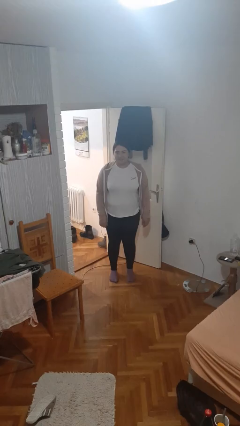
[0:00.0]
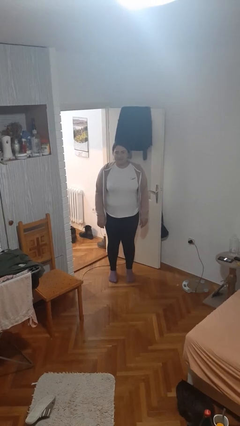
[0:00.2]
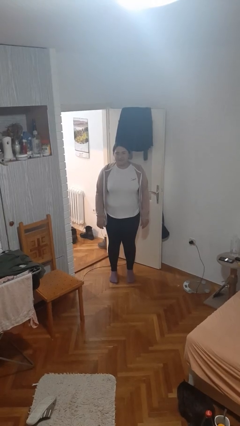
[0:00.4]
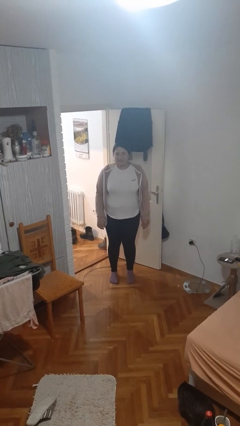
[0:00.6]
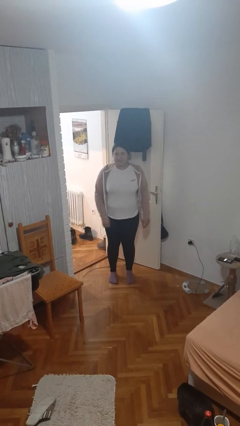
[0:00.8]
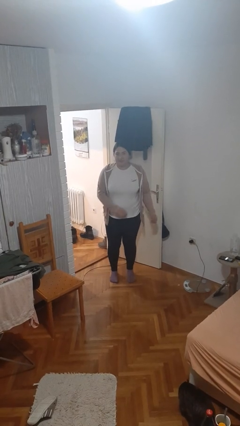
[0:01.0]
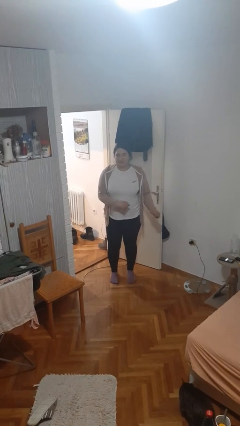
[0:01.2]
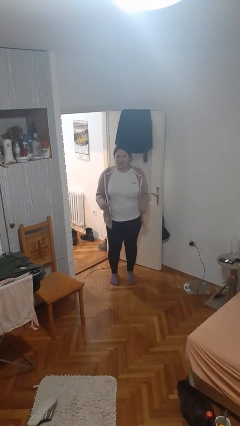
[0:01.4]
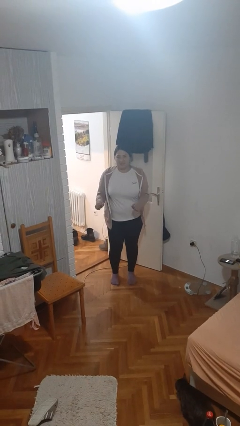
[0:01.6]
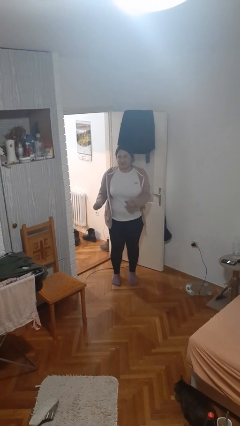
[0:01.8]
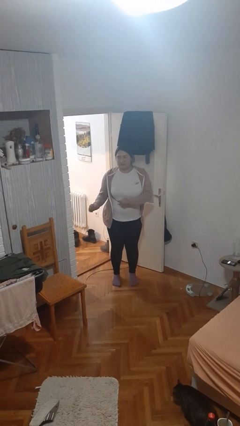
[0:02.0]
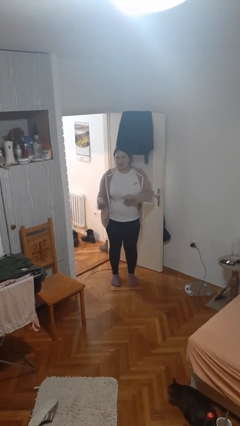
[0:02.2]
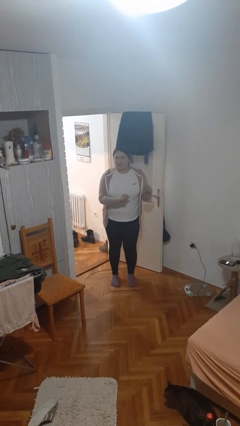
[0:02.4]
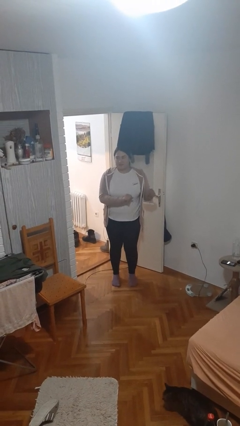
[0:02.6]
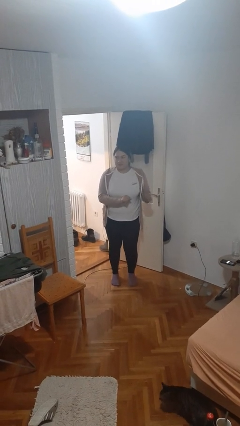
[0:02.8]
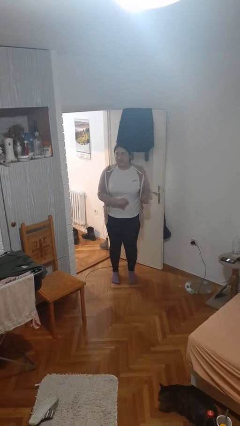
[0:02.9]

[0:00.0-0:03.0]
person dances in place

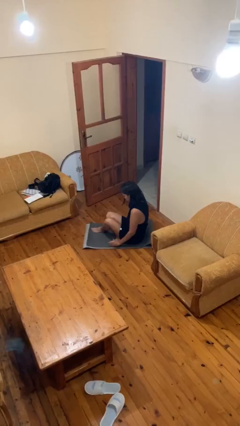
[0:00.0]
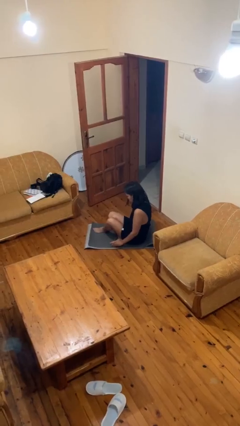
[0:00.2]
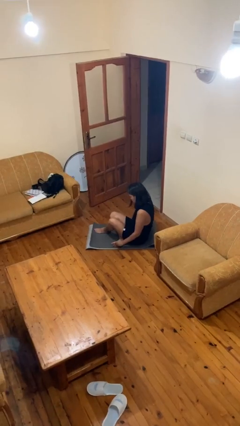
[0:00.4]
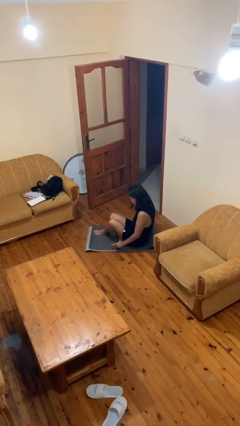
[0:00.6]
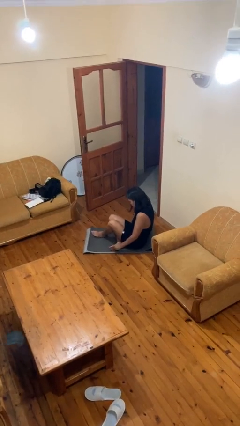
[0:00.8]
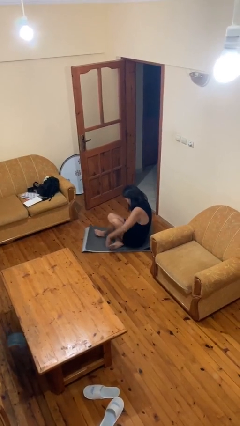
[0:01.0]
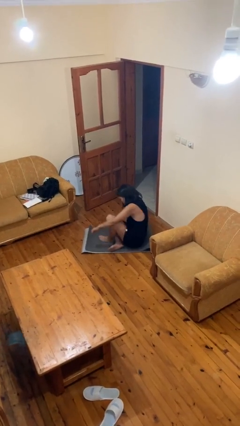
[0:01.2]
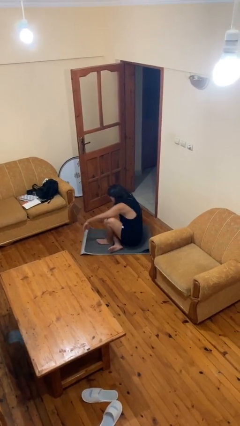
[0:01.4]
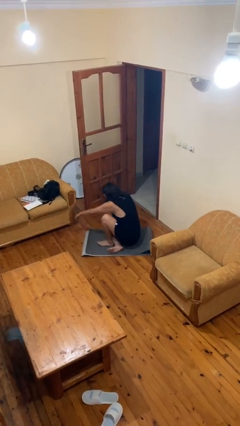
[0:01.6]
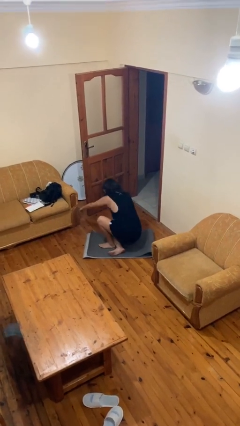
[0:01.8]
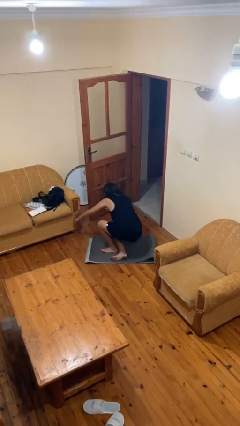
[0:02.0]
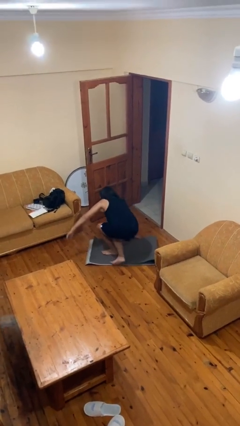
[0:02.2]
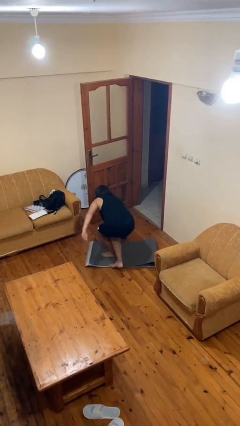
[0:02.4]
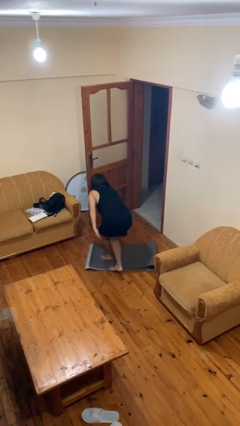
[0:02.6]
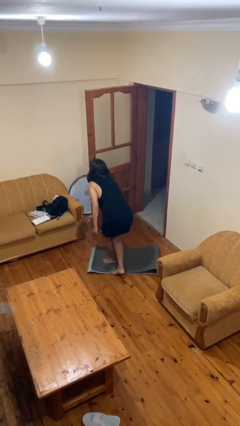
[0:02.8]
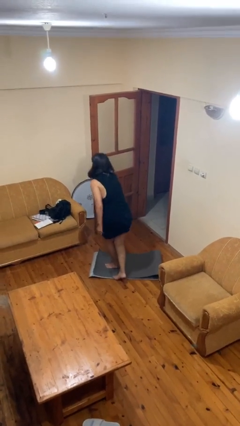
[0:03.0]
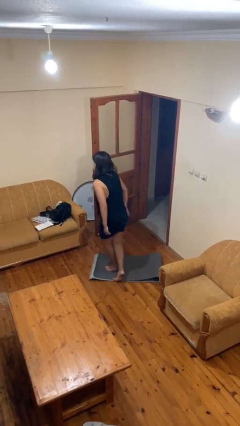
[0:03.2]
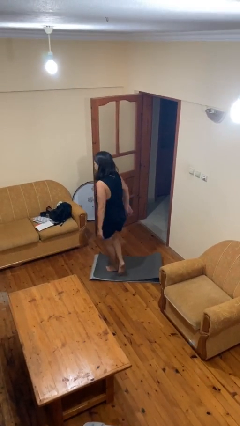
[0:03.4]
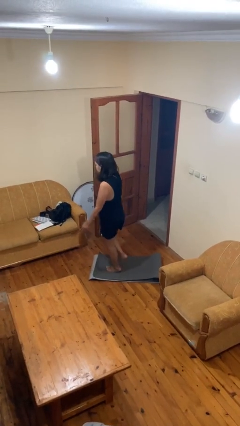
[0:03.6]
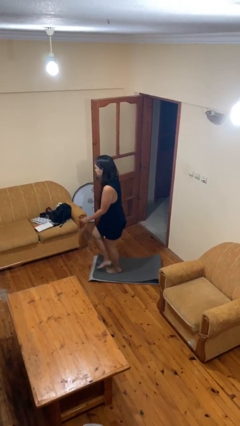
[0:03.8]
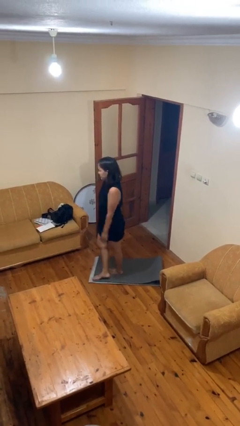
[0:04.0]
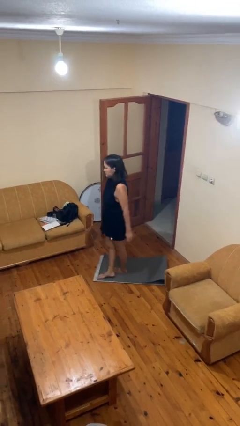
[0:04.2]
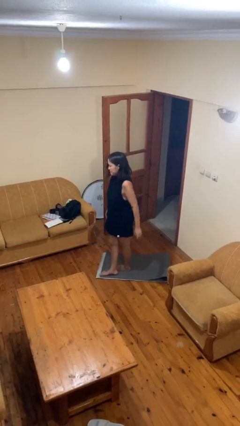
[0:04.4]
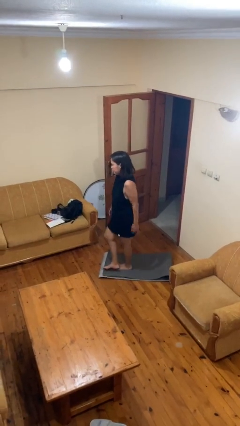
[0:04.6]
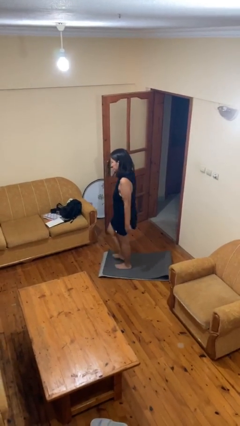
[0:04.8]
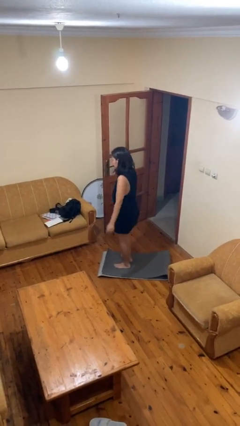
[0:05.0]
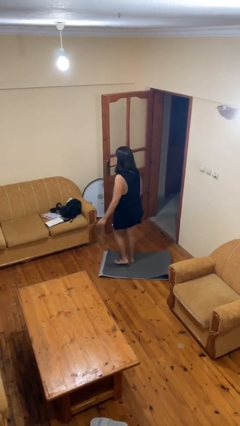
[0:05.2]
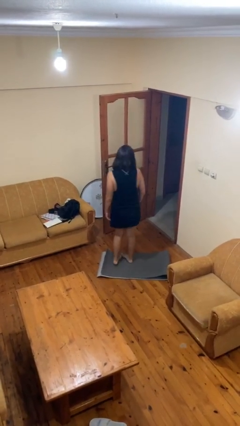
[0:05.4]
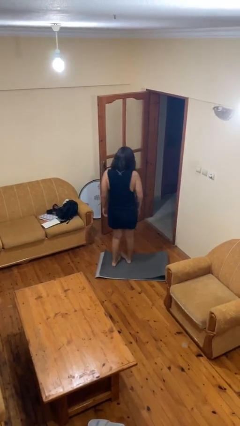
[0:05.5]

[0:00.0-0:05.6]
person stands up from floor

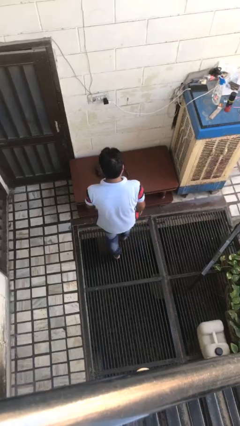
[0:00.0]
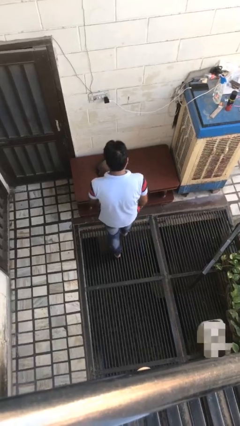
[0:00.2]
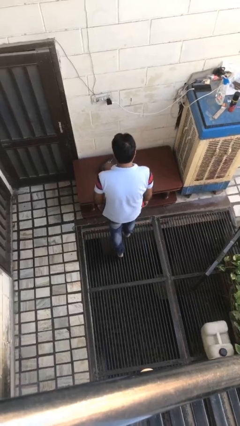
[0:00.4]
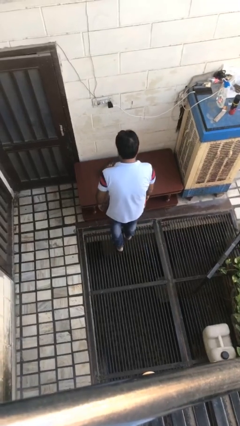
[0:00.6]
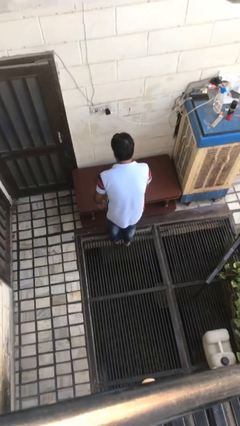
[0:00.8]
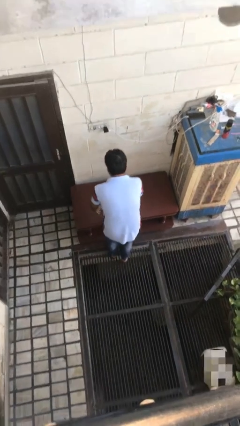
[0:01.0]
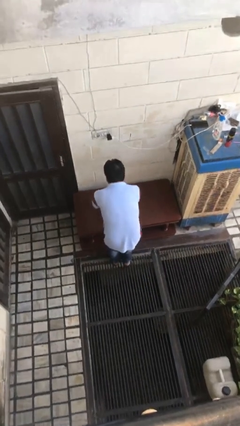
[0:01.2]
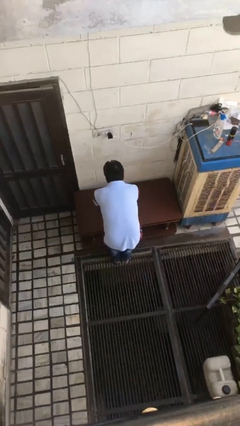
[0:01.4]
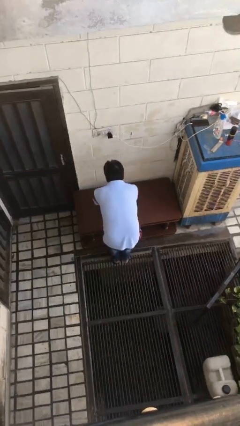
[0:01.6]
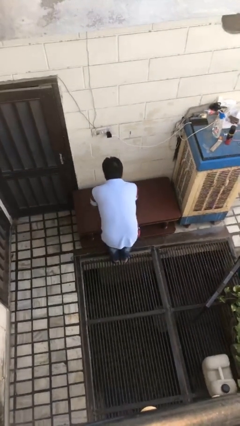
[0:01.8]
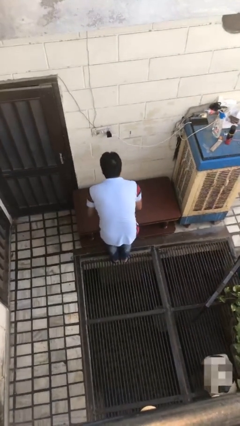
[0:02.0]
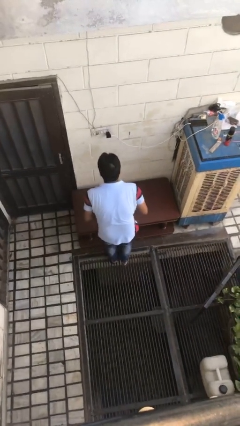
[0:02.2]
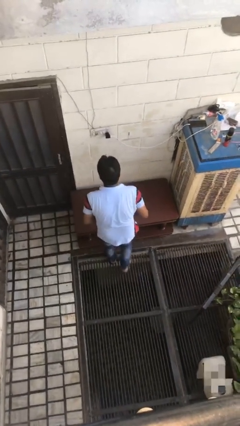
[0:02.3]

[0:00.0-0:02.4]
person picks up object from table

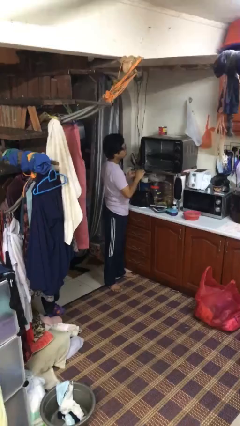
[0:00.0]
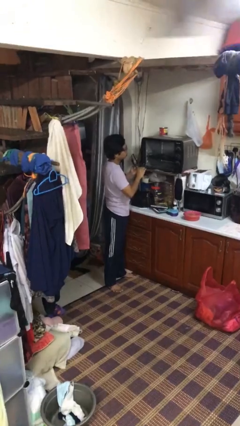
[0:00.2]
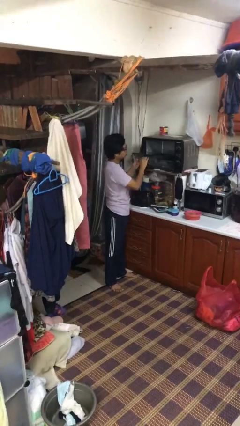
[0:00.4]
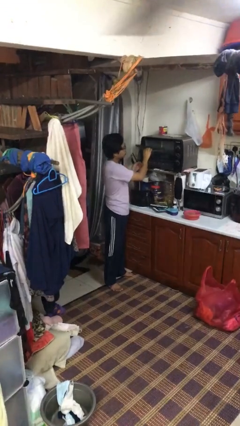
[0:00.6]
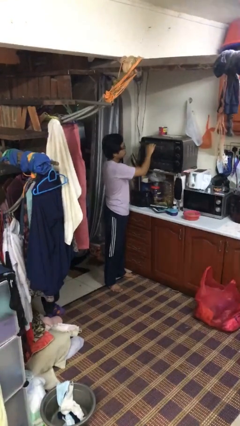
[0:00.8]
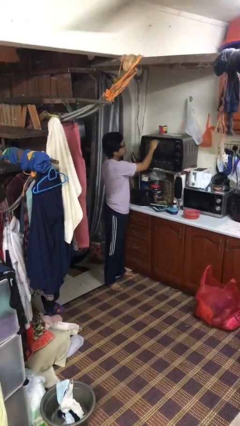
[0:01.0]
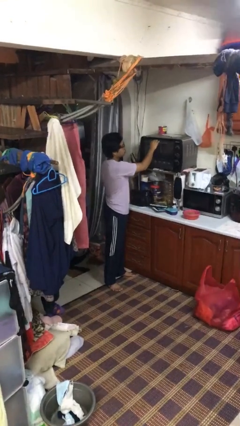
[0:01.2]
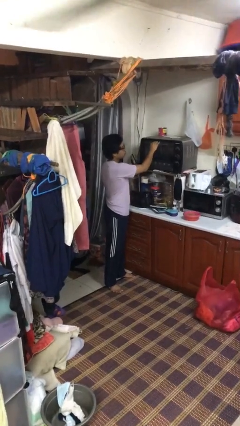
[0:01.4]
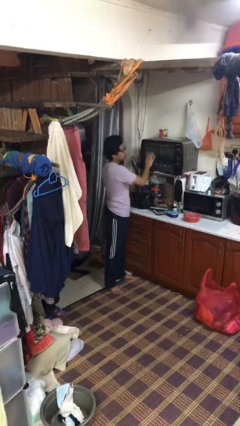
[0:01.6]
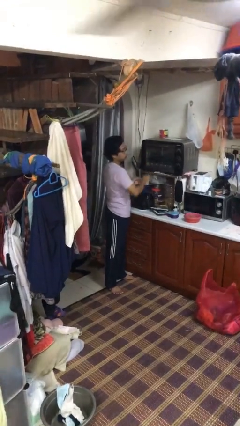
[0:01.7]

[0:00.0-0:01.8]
person closes oven door

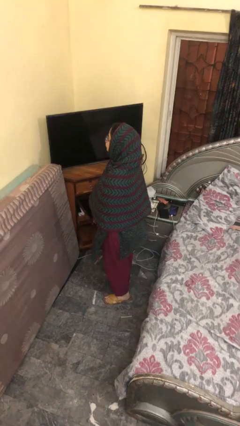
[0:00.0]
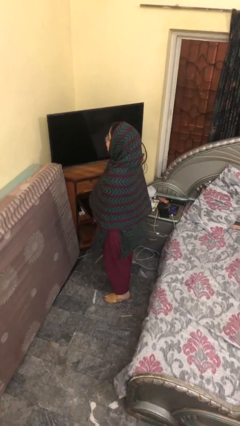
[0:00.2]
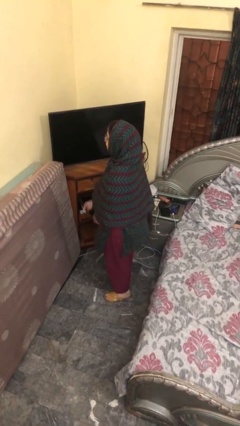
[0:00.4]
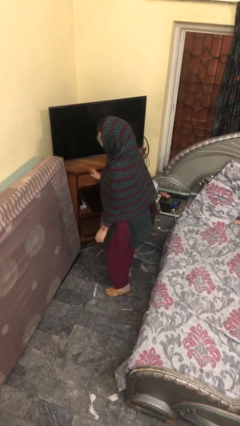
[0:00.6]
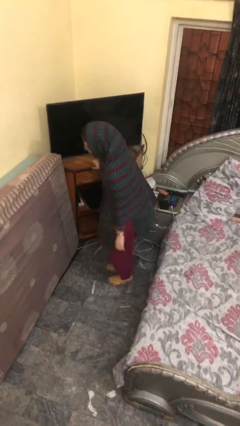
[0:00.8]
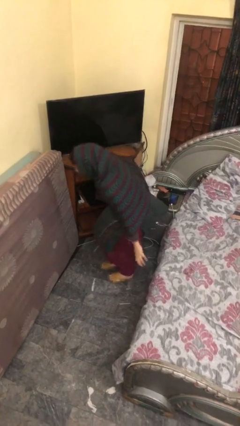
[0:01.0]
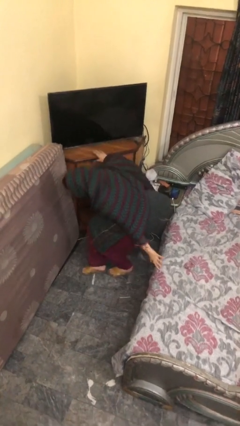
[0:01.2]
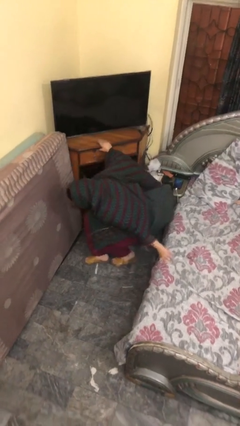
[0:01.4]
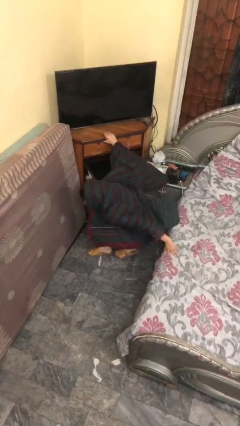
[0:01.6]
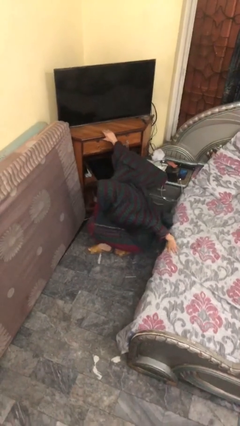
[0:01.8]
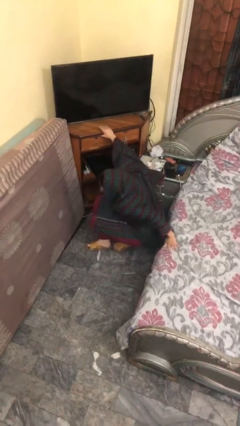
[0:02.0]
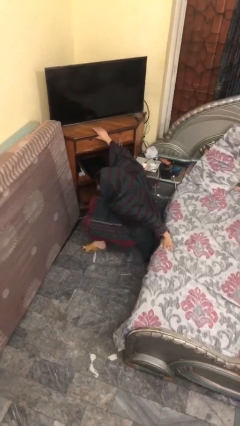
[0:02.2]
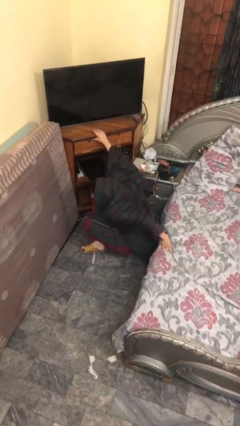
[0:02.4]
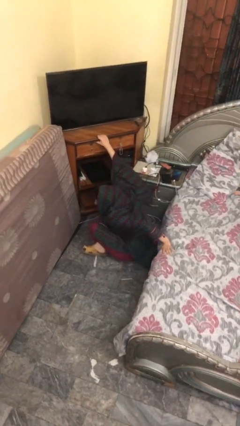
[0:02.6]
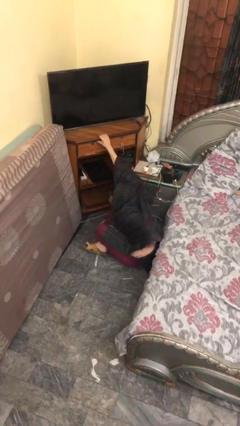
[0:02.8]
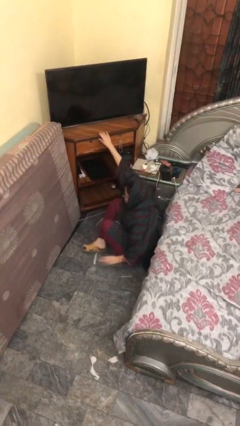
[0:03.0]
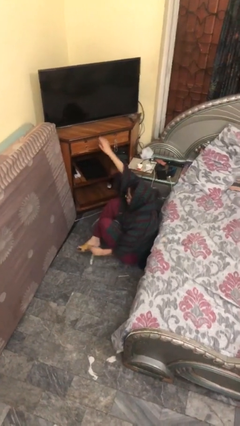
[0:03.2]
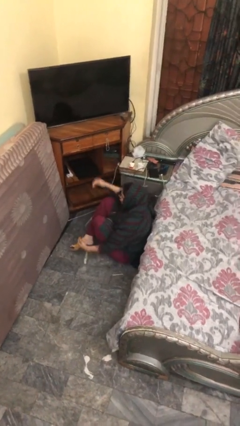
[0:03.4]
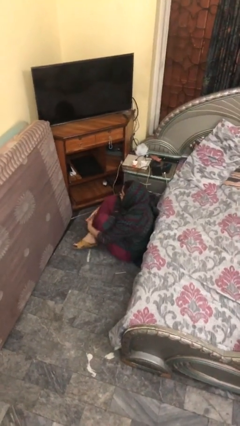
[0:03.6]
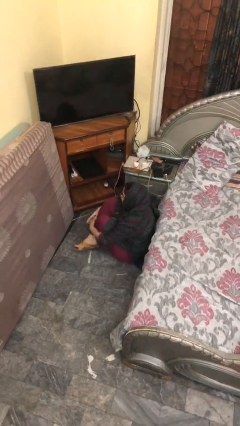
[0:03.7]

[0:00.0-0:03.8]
person sits crisscross

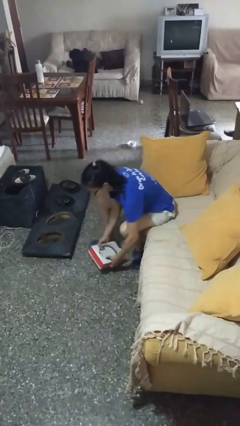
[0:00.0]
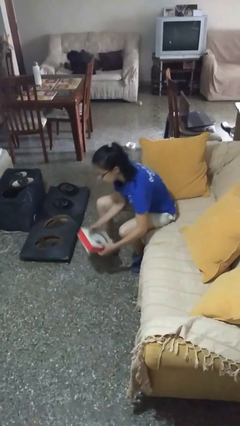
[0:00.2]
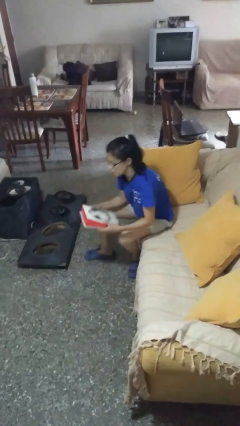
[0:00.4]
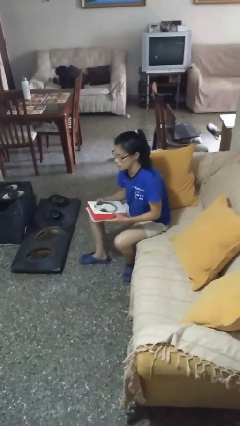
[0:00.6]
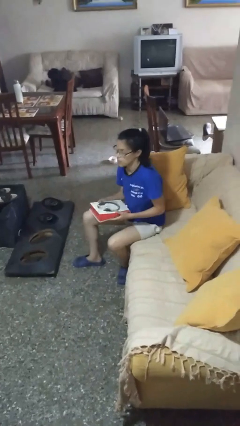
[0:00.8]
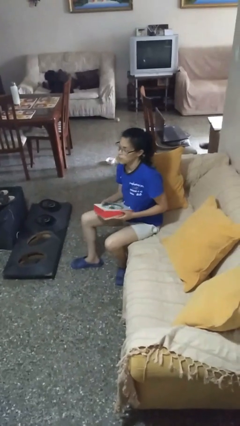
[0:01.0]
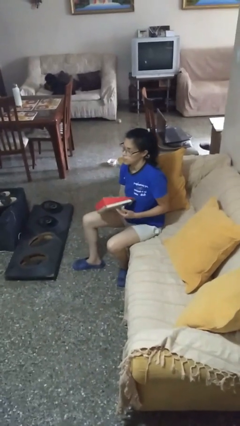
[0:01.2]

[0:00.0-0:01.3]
person picks up object from floor
